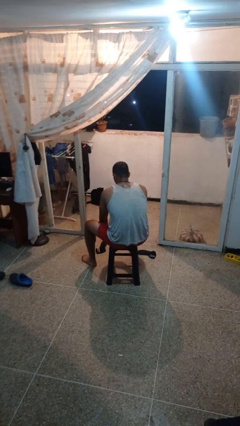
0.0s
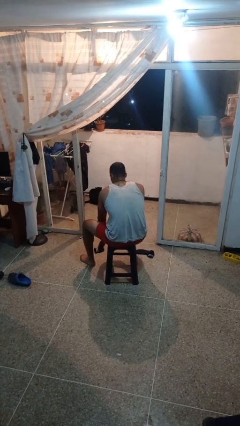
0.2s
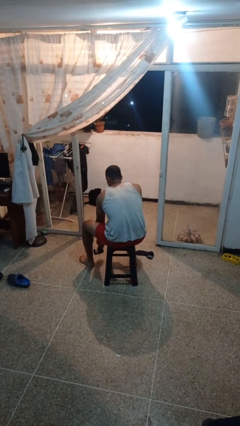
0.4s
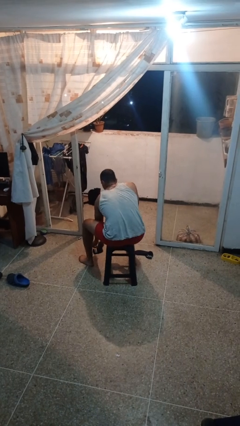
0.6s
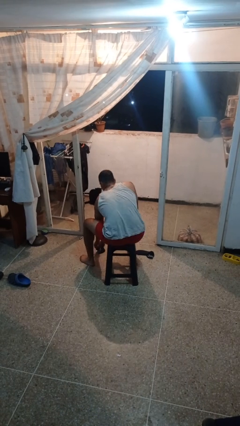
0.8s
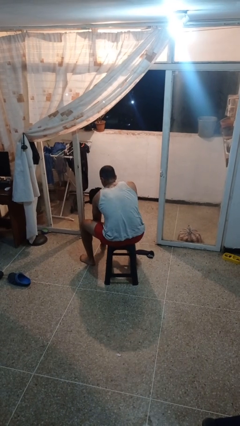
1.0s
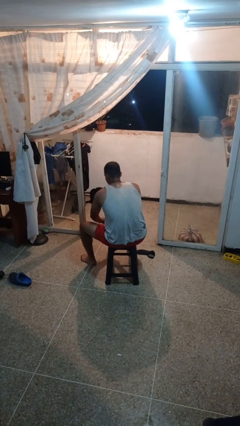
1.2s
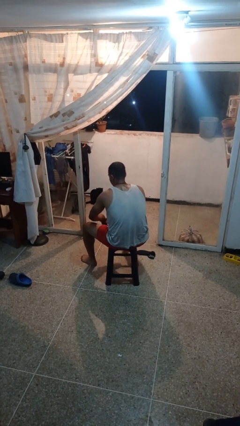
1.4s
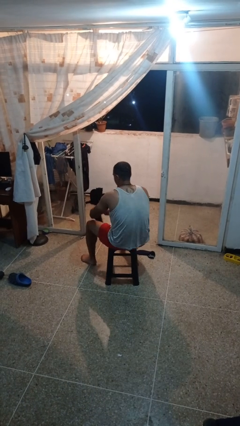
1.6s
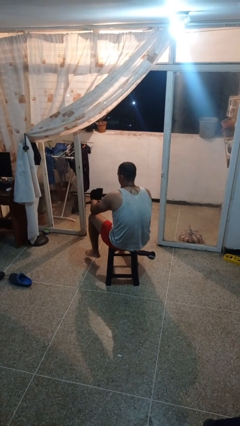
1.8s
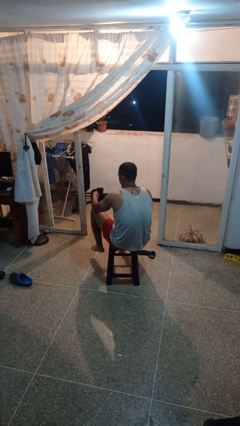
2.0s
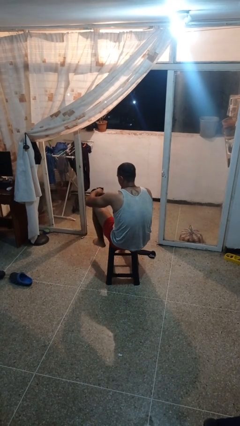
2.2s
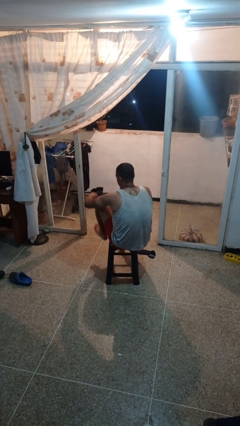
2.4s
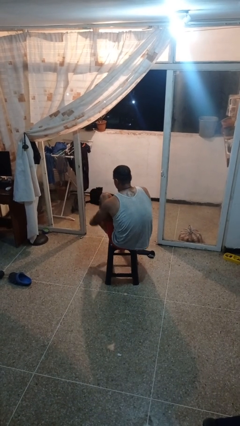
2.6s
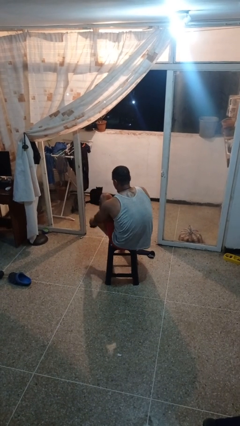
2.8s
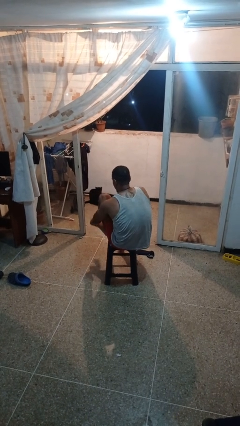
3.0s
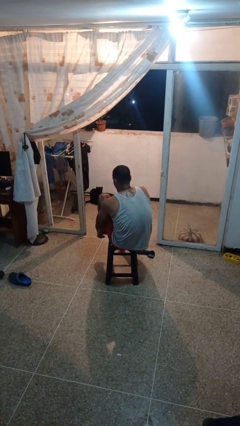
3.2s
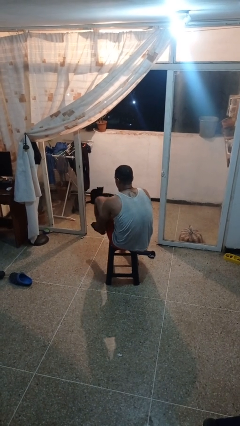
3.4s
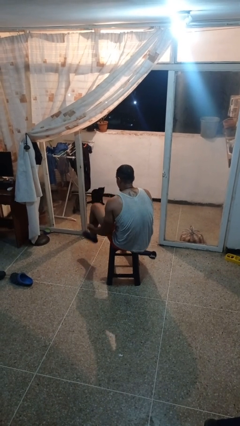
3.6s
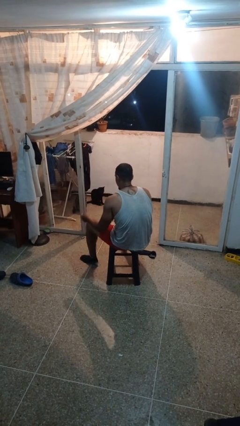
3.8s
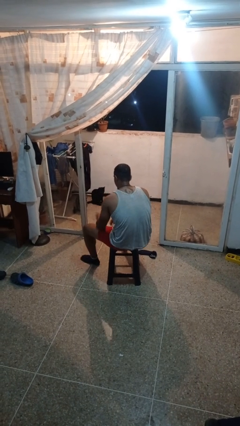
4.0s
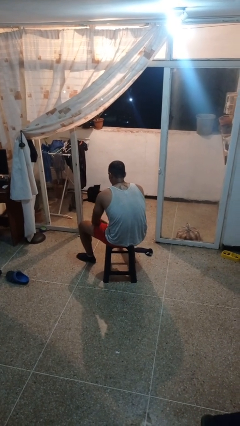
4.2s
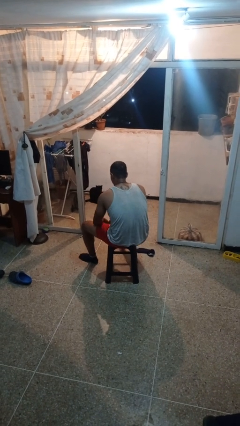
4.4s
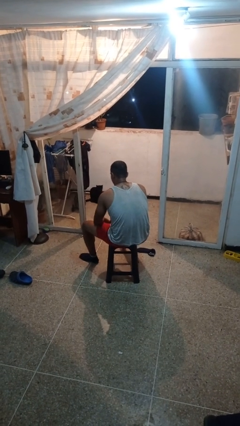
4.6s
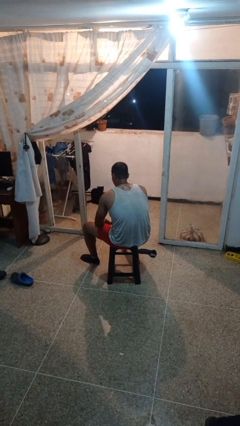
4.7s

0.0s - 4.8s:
person puts on socks

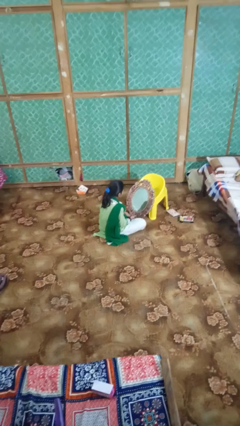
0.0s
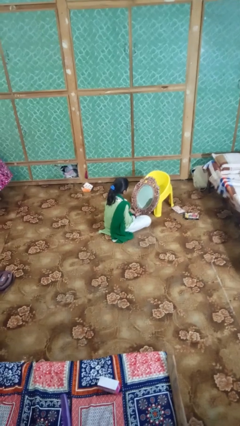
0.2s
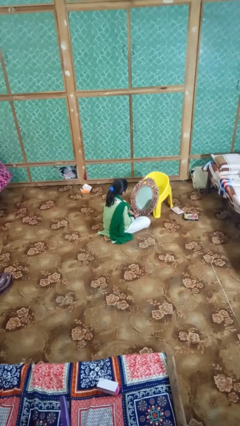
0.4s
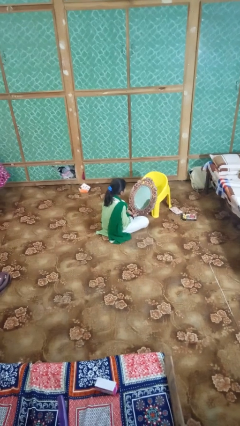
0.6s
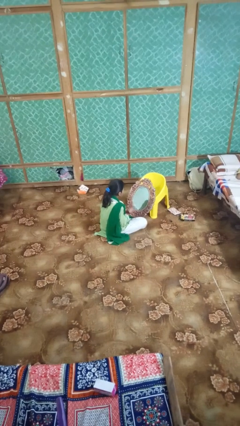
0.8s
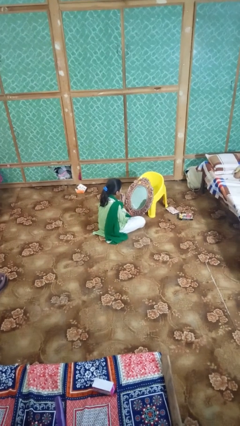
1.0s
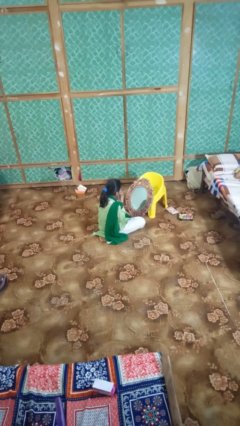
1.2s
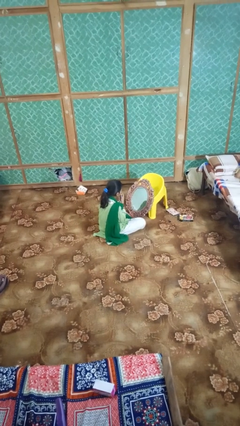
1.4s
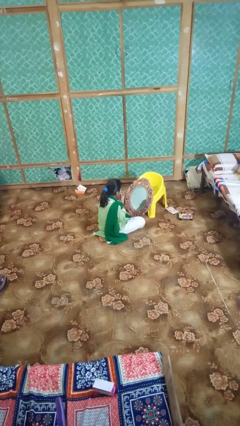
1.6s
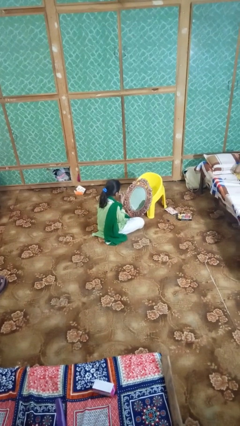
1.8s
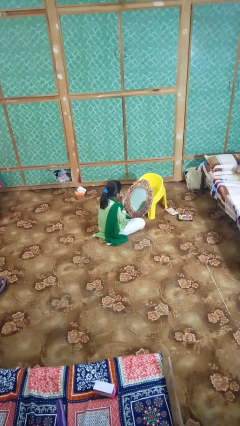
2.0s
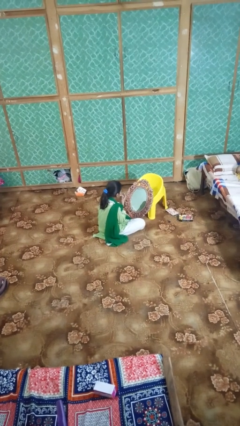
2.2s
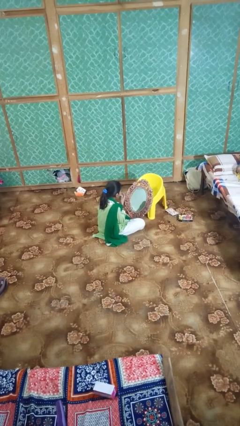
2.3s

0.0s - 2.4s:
person applies lip makeup

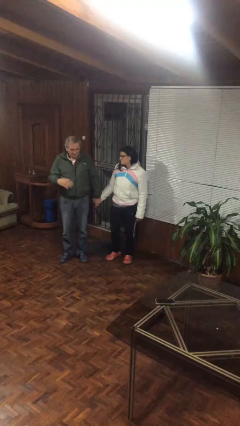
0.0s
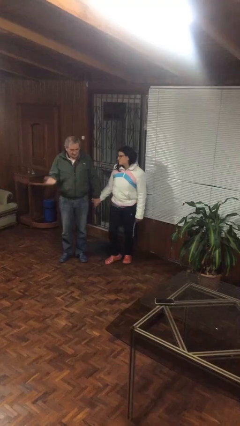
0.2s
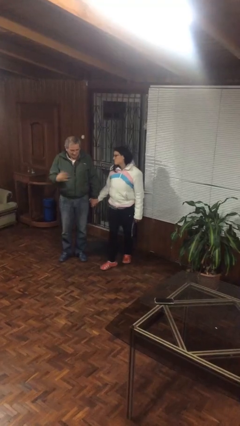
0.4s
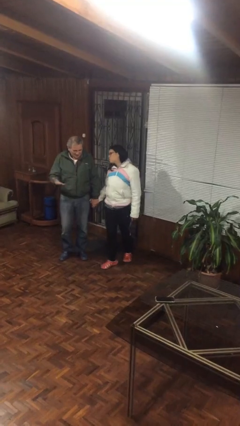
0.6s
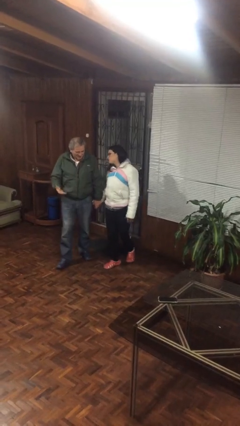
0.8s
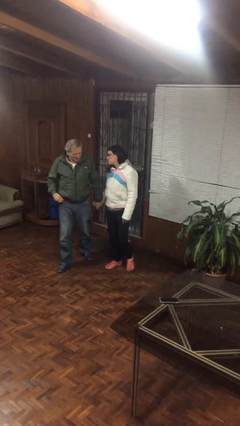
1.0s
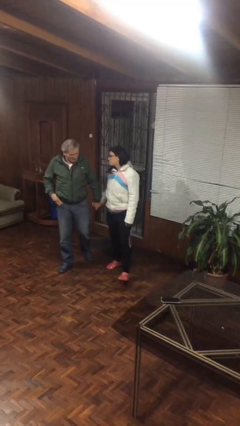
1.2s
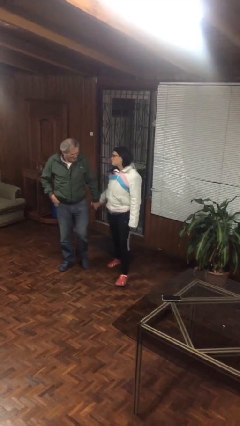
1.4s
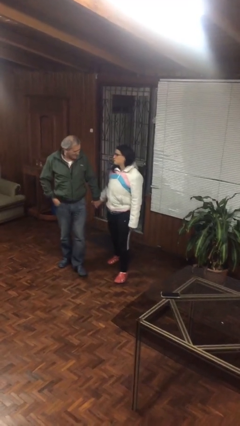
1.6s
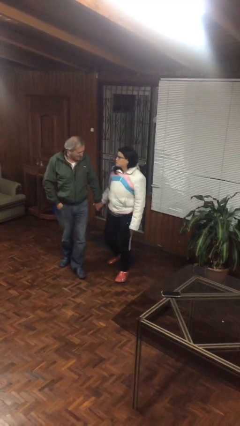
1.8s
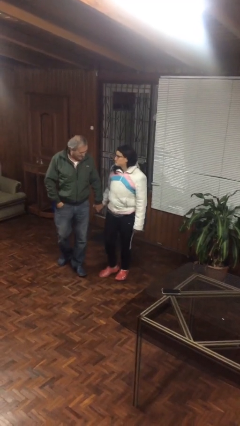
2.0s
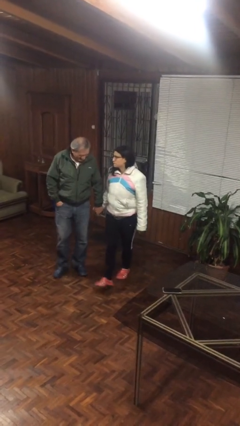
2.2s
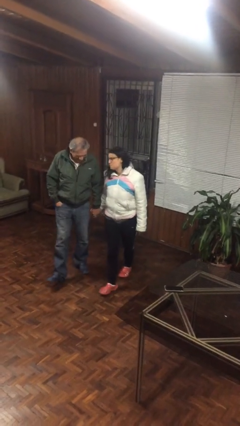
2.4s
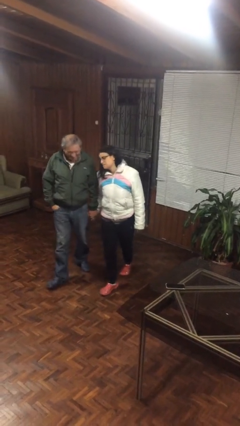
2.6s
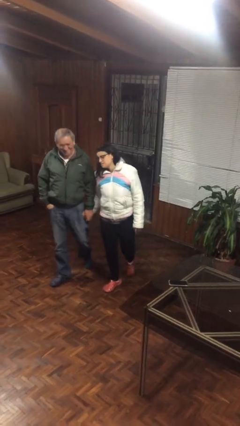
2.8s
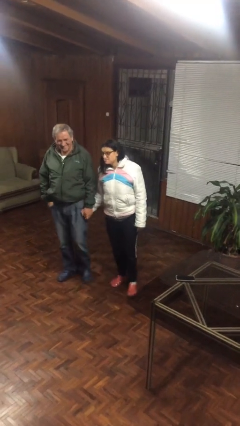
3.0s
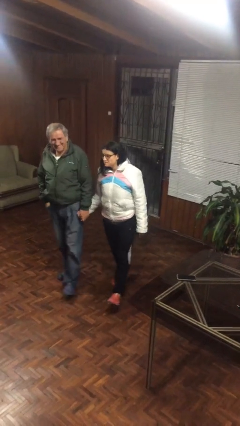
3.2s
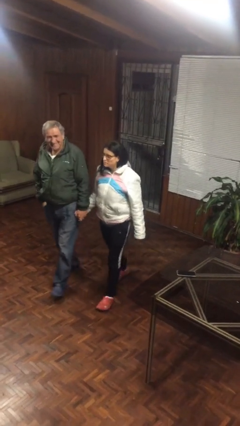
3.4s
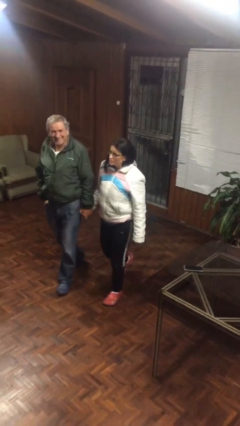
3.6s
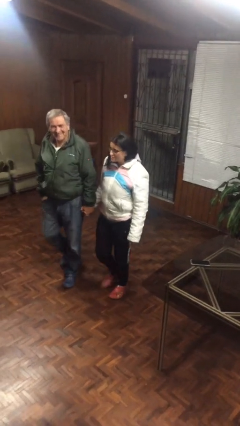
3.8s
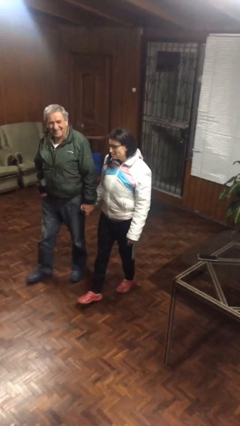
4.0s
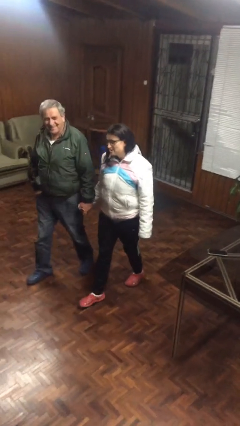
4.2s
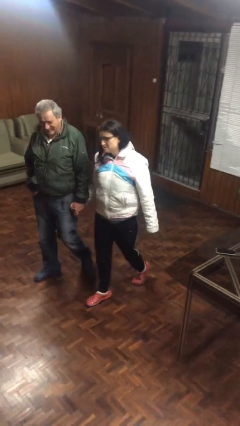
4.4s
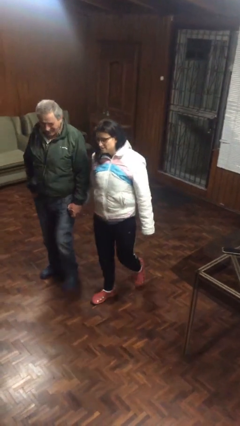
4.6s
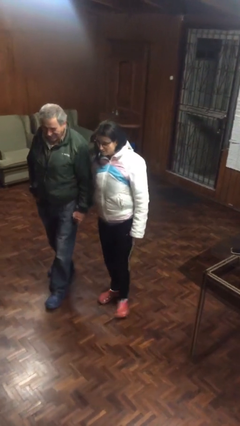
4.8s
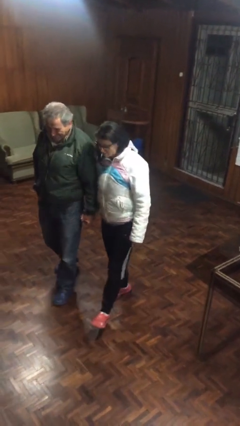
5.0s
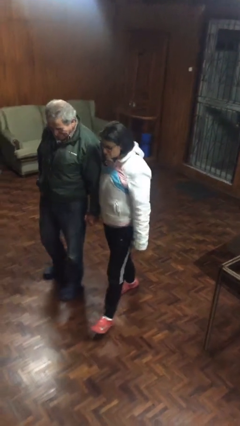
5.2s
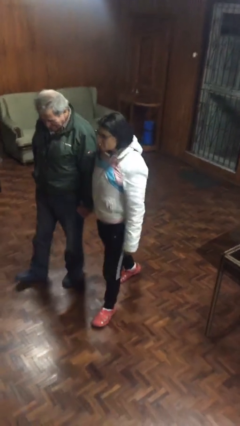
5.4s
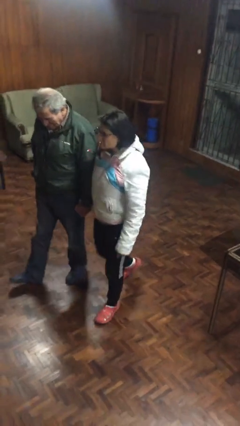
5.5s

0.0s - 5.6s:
person holds hand

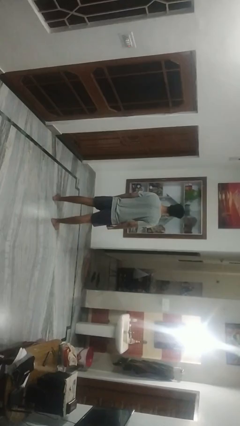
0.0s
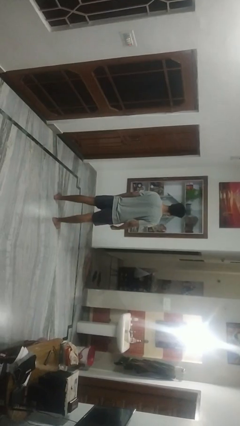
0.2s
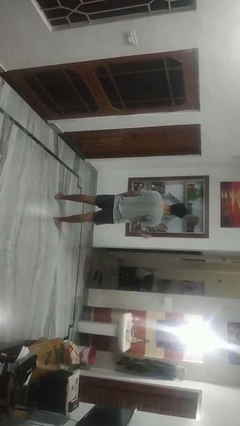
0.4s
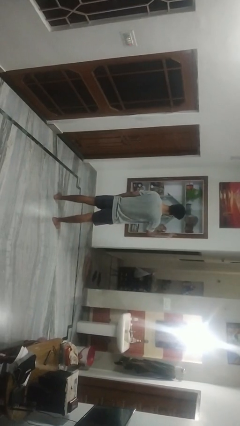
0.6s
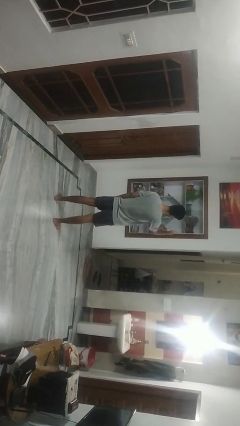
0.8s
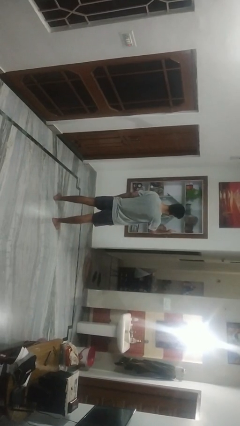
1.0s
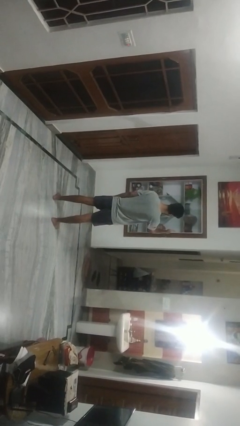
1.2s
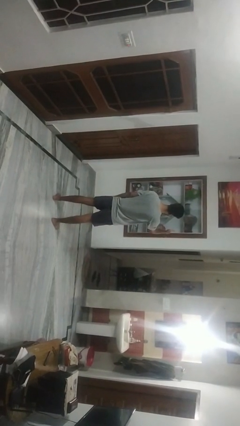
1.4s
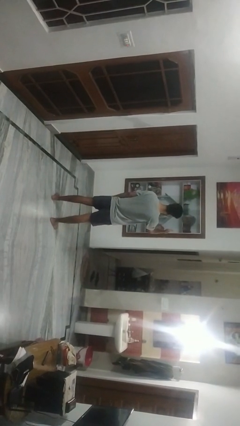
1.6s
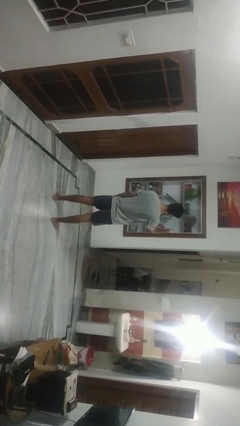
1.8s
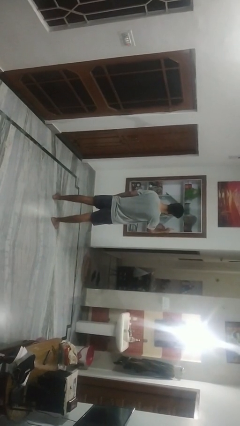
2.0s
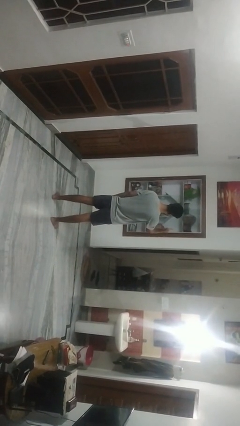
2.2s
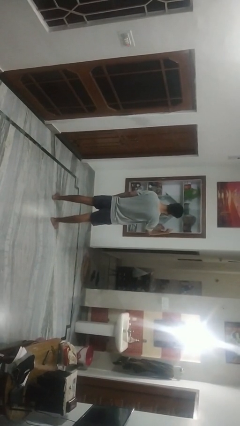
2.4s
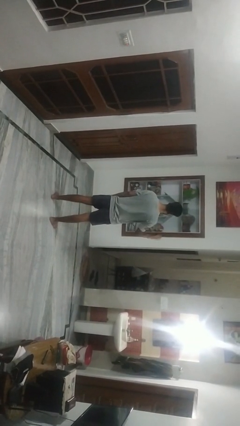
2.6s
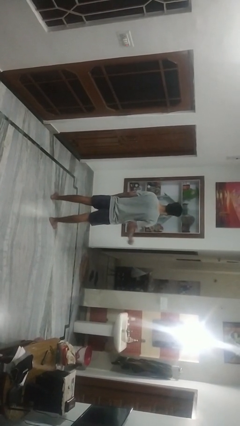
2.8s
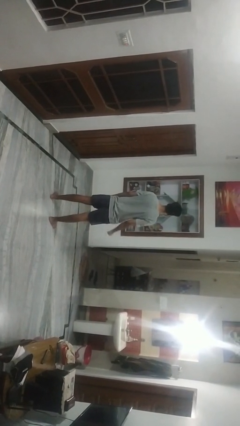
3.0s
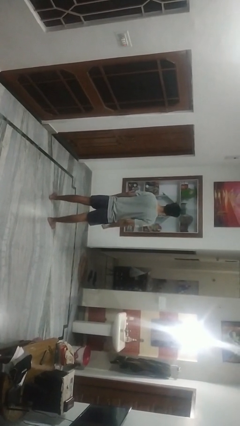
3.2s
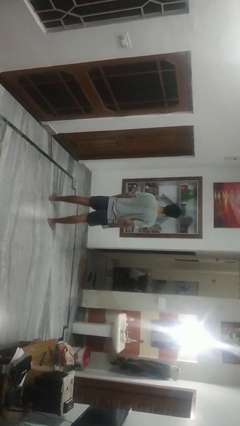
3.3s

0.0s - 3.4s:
person gestures thumbs up

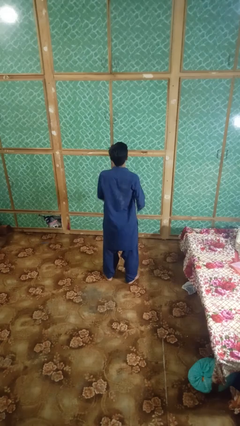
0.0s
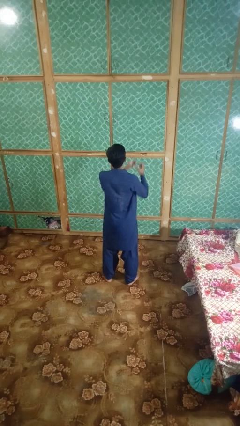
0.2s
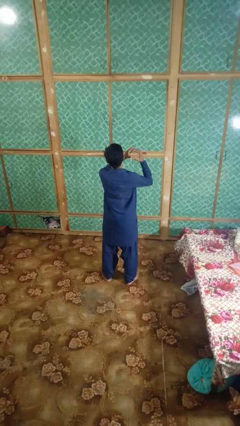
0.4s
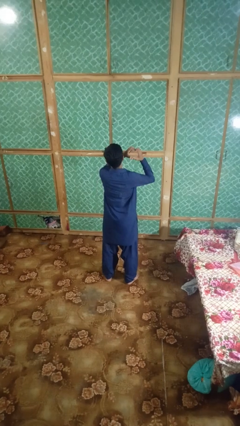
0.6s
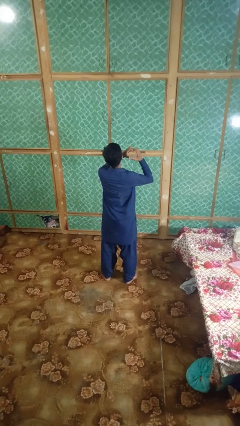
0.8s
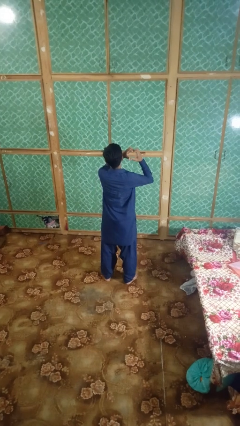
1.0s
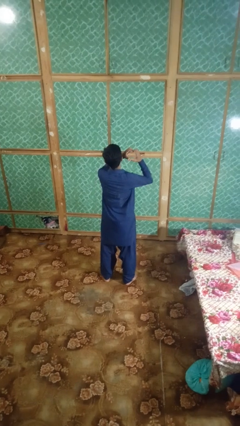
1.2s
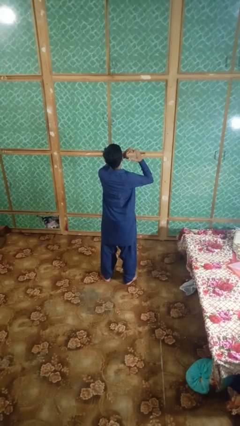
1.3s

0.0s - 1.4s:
person gestures heart

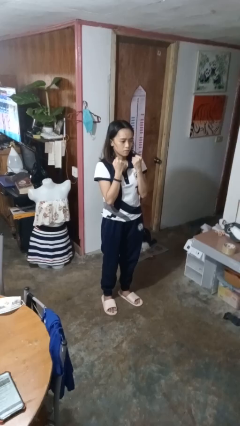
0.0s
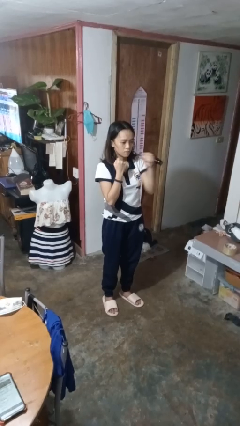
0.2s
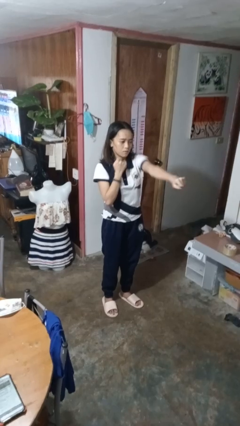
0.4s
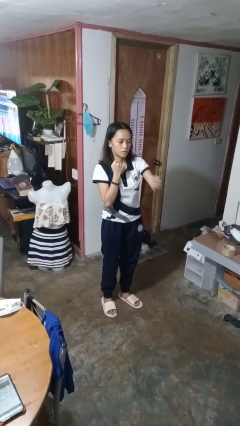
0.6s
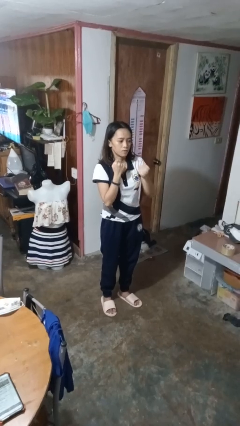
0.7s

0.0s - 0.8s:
person punches
